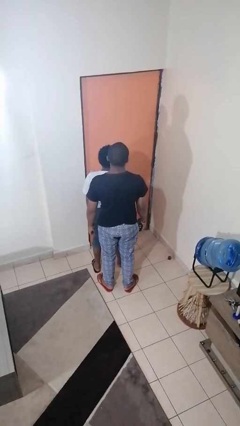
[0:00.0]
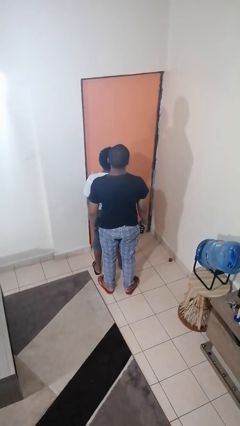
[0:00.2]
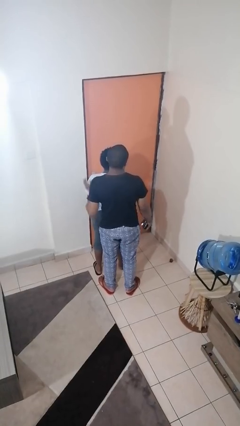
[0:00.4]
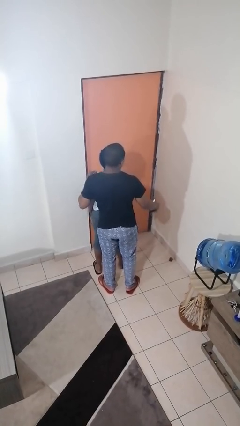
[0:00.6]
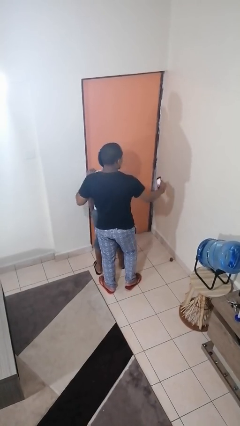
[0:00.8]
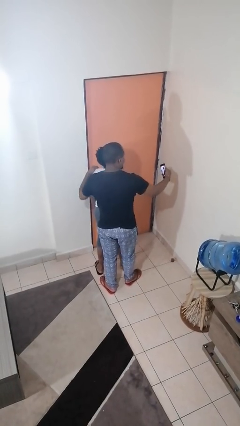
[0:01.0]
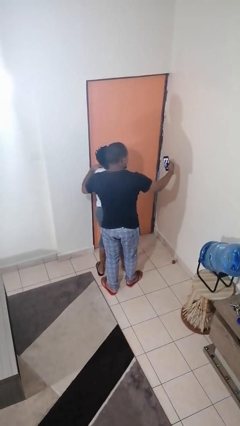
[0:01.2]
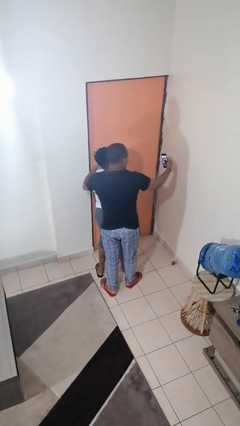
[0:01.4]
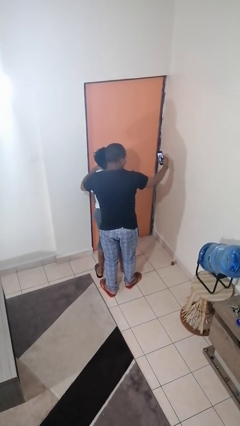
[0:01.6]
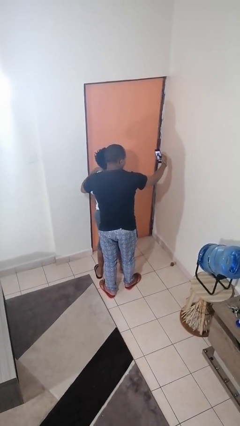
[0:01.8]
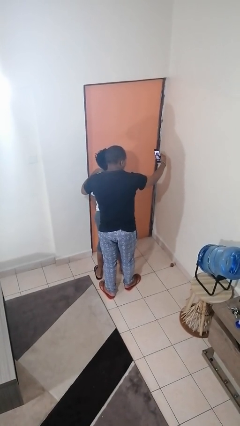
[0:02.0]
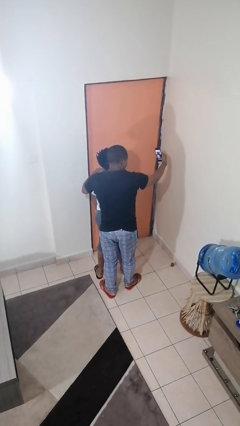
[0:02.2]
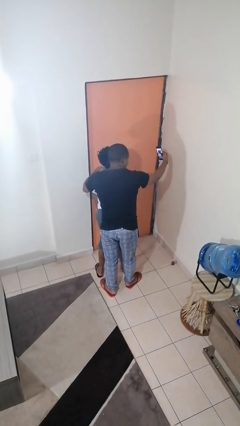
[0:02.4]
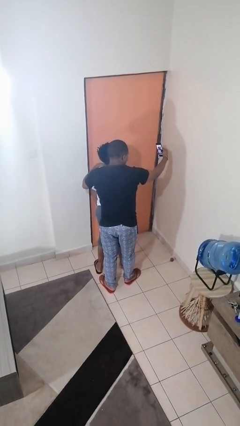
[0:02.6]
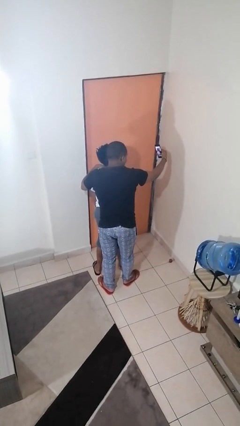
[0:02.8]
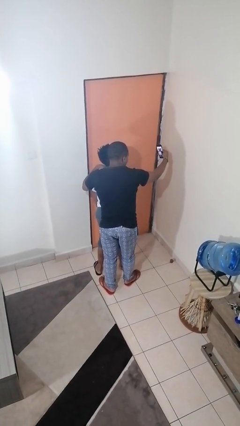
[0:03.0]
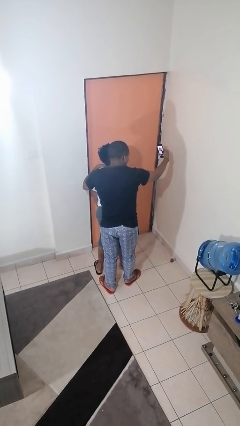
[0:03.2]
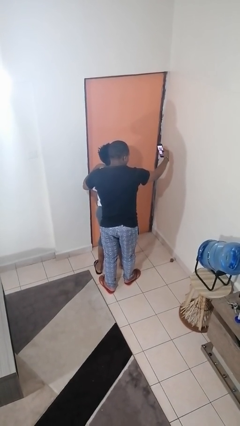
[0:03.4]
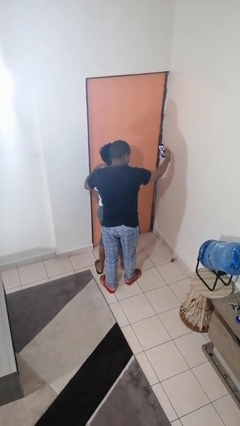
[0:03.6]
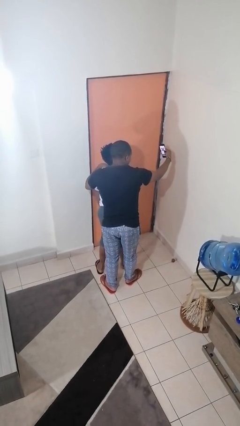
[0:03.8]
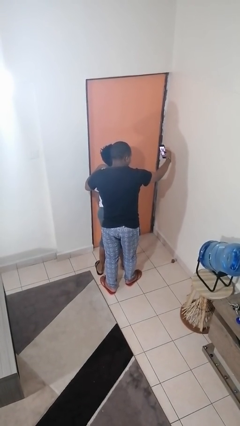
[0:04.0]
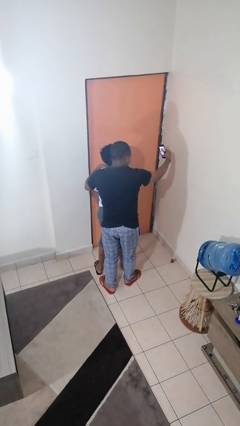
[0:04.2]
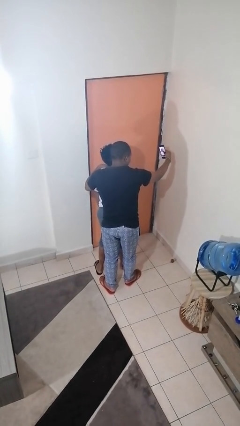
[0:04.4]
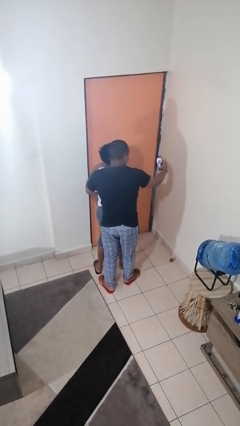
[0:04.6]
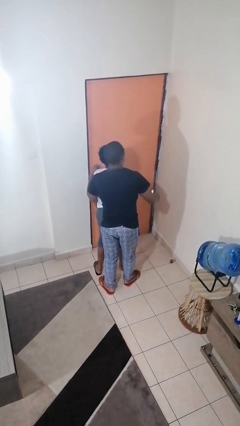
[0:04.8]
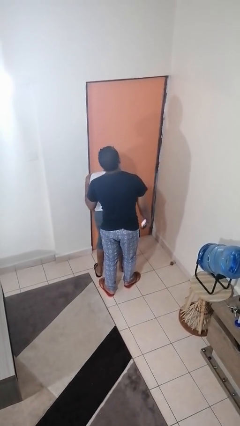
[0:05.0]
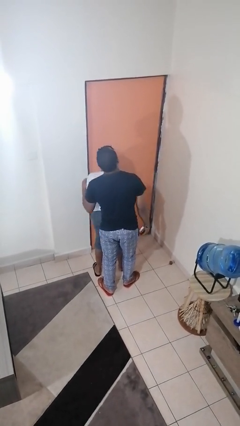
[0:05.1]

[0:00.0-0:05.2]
person takes selfie with person

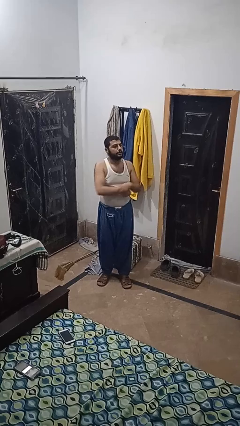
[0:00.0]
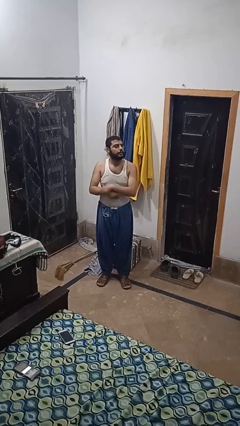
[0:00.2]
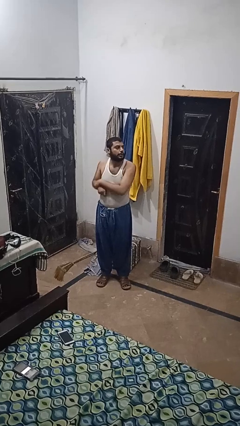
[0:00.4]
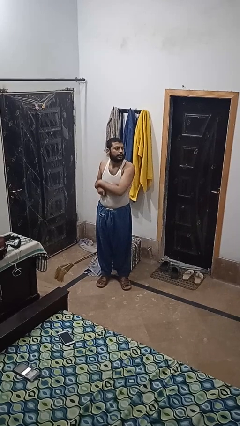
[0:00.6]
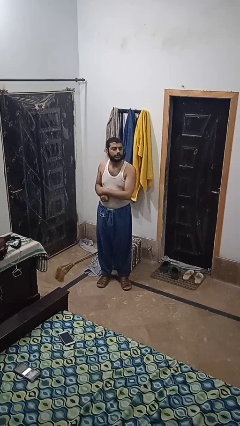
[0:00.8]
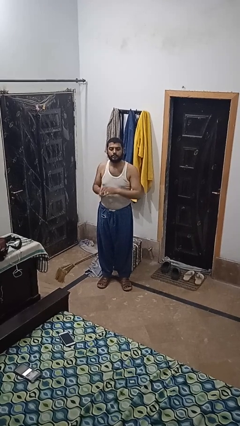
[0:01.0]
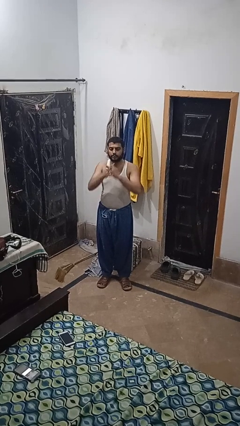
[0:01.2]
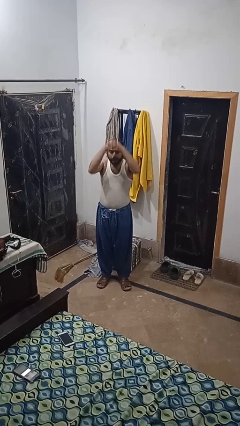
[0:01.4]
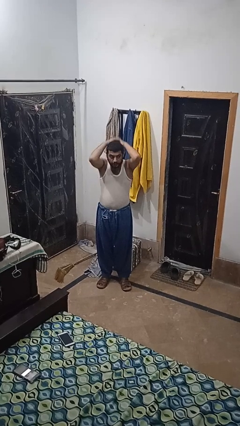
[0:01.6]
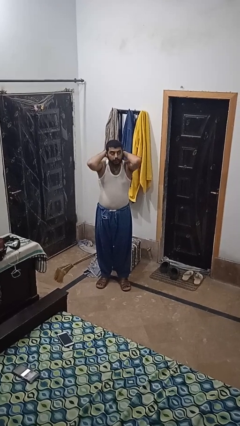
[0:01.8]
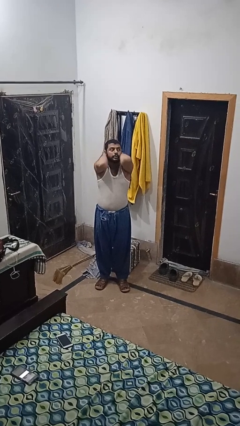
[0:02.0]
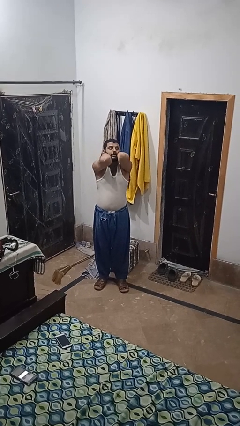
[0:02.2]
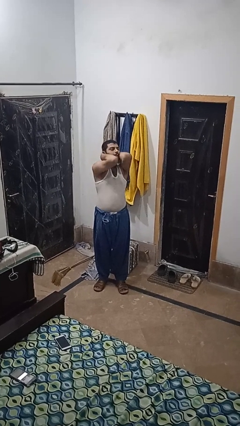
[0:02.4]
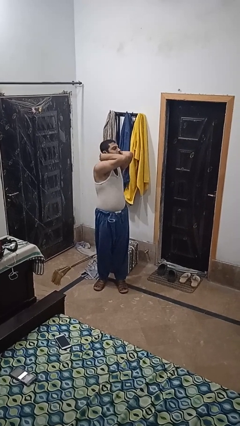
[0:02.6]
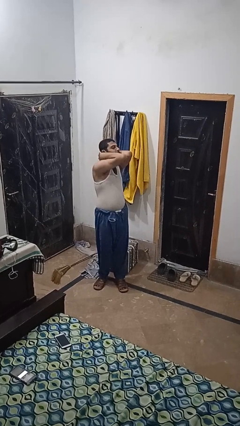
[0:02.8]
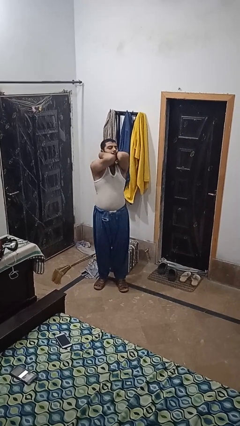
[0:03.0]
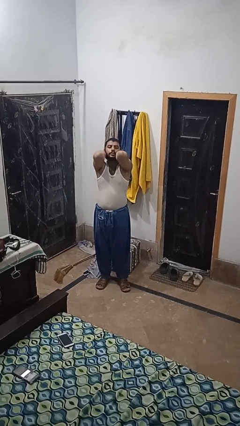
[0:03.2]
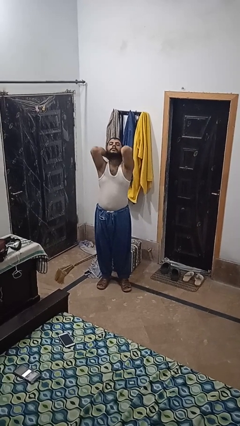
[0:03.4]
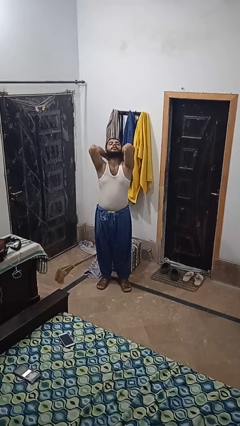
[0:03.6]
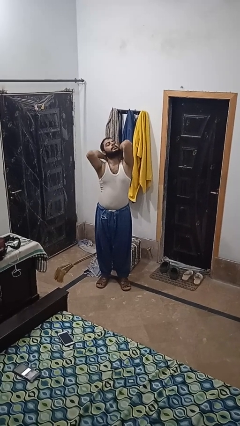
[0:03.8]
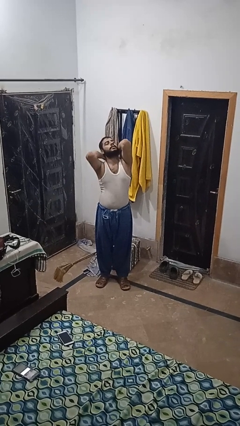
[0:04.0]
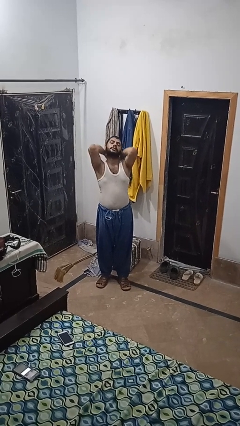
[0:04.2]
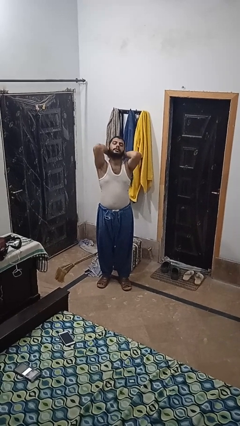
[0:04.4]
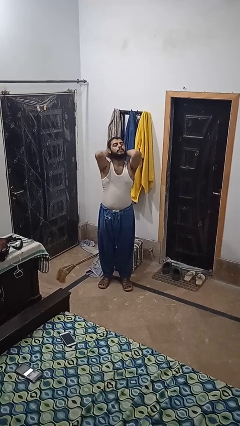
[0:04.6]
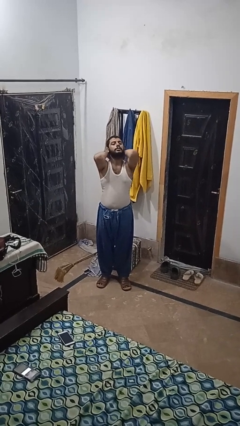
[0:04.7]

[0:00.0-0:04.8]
person stretches arms over head

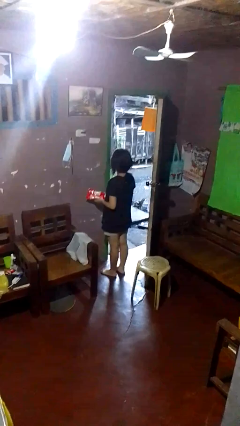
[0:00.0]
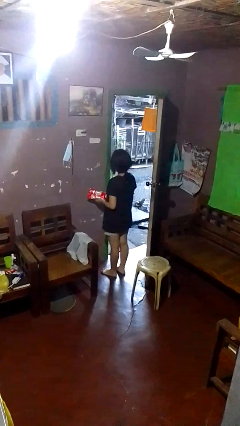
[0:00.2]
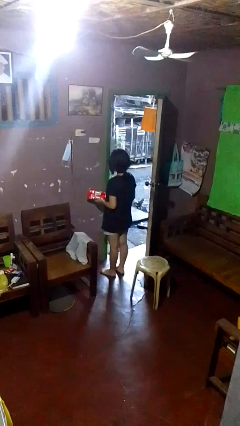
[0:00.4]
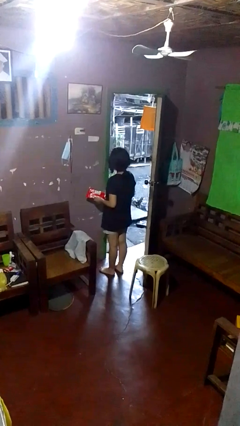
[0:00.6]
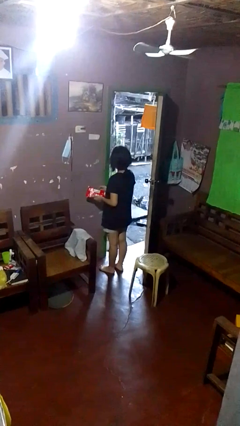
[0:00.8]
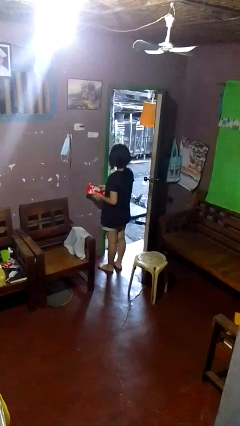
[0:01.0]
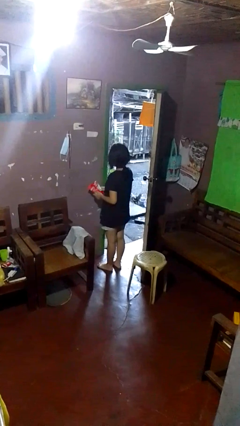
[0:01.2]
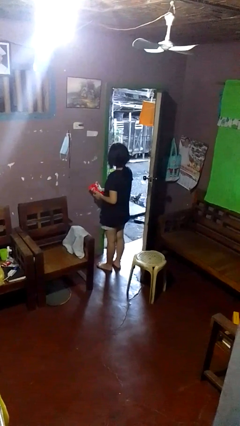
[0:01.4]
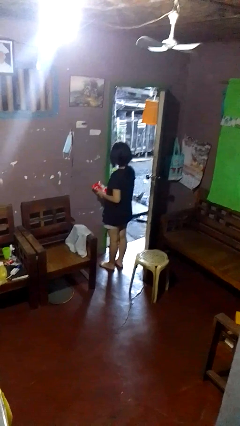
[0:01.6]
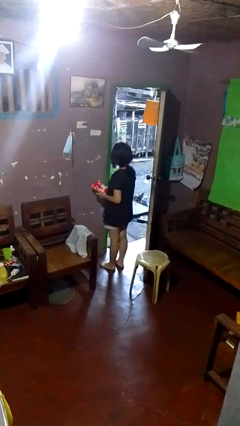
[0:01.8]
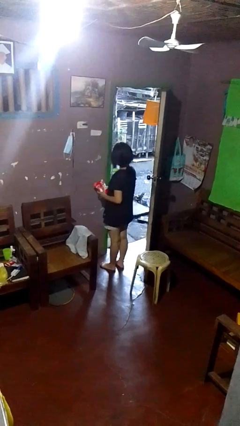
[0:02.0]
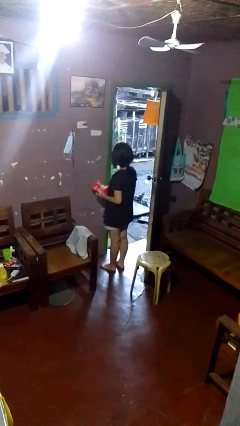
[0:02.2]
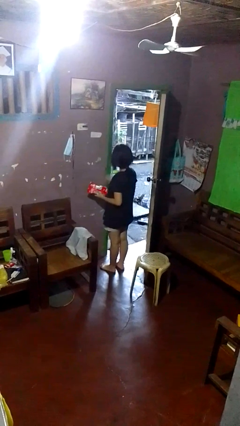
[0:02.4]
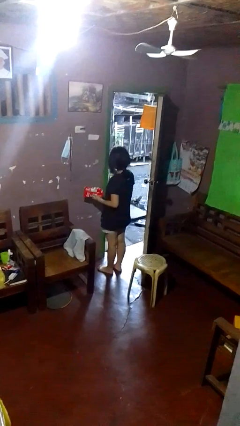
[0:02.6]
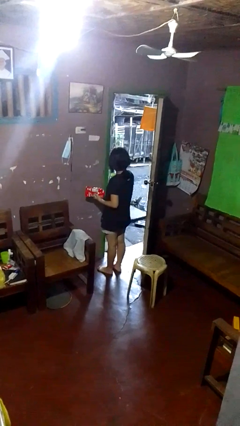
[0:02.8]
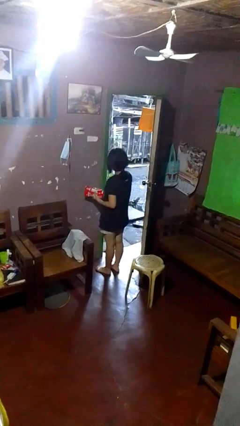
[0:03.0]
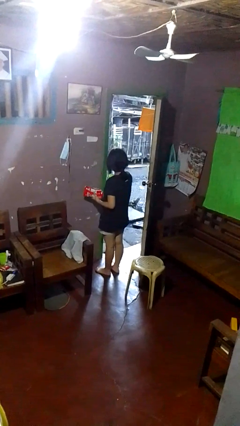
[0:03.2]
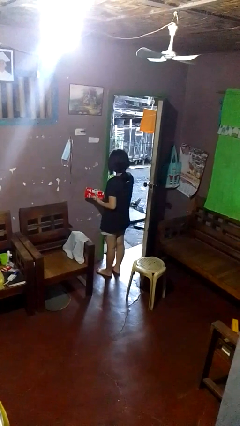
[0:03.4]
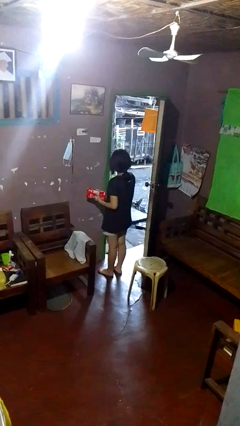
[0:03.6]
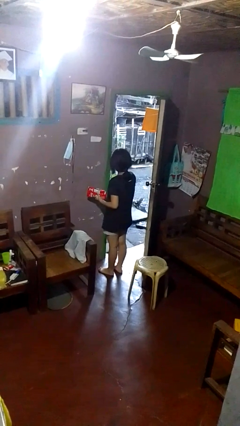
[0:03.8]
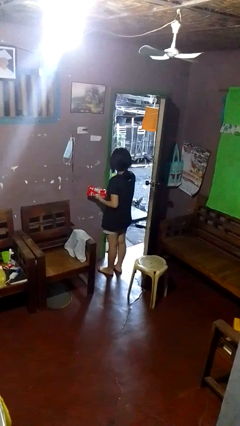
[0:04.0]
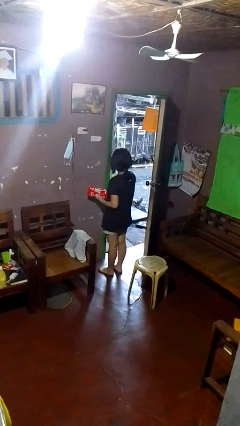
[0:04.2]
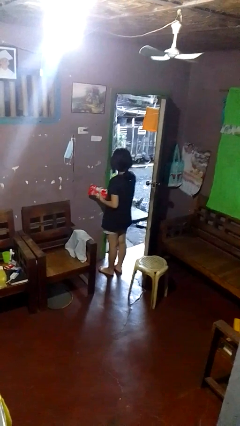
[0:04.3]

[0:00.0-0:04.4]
person eats snack from bag

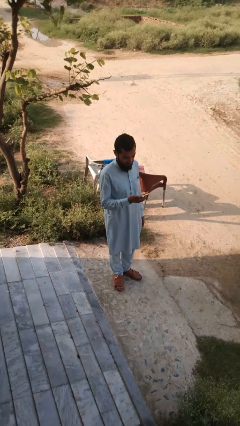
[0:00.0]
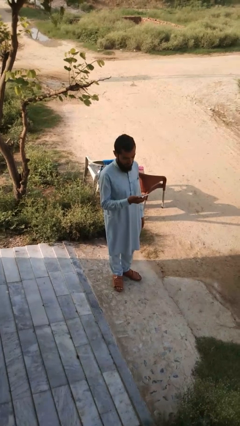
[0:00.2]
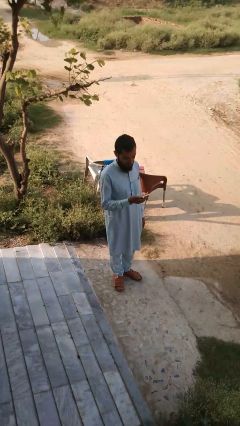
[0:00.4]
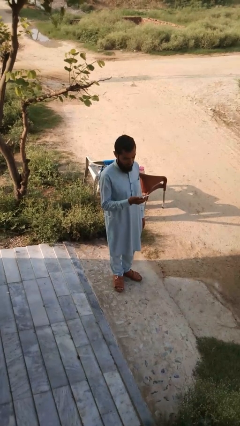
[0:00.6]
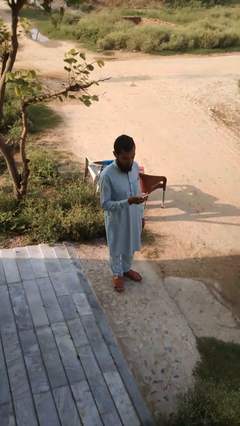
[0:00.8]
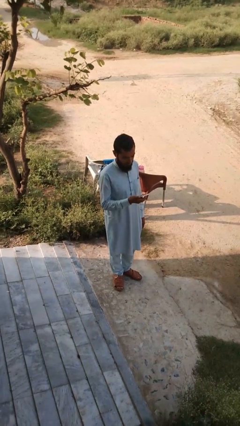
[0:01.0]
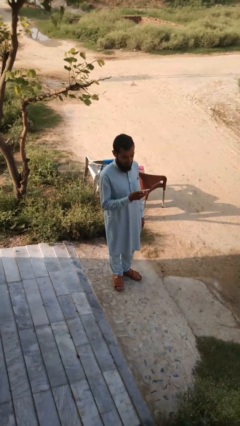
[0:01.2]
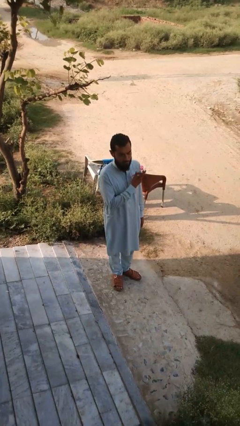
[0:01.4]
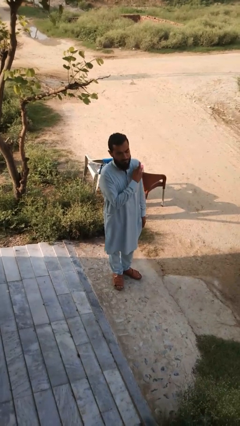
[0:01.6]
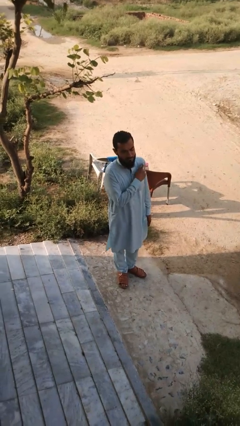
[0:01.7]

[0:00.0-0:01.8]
person puts phone into pocket

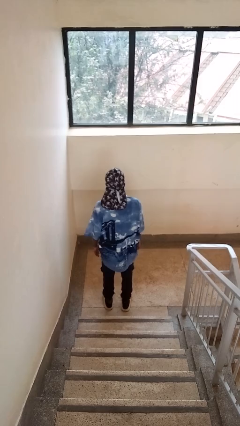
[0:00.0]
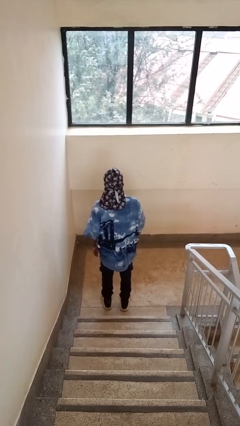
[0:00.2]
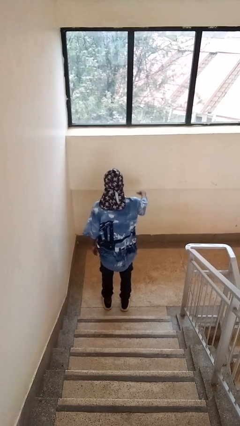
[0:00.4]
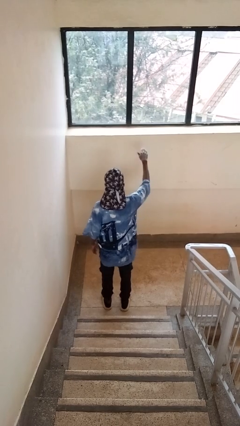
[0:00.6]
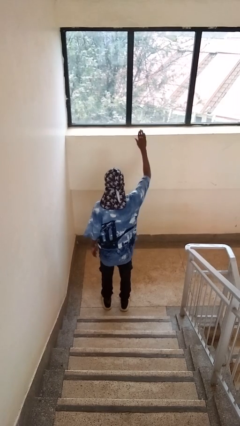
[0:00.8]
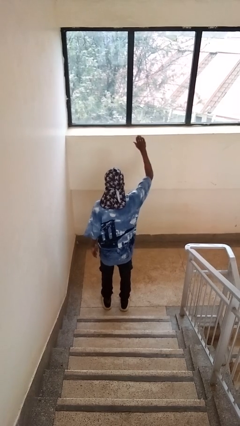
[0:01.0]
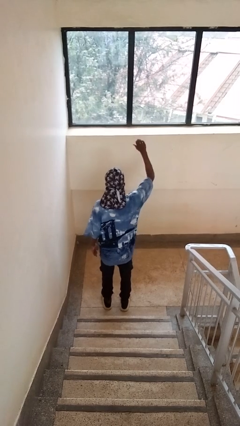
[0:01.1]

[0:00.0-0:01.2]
person gestures swipe up
